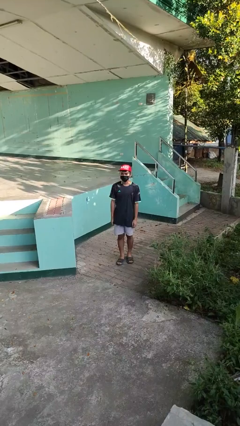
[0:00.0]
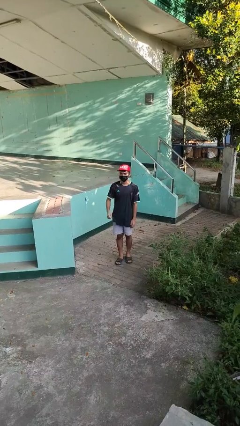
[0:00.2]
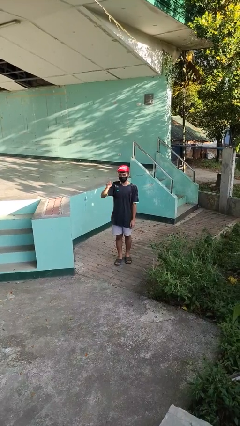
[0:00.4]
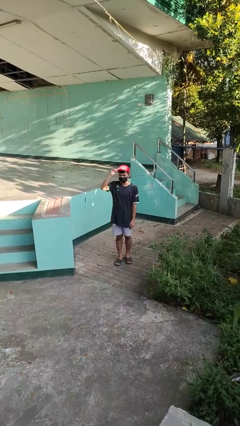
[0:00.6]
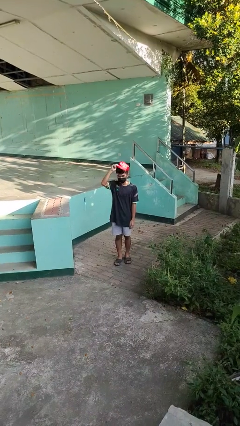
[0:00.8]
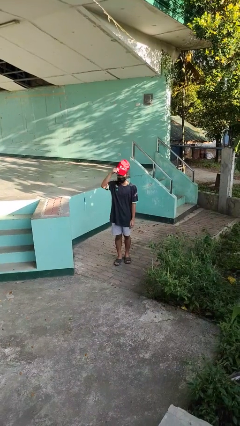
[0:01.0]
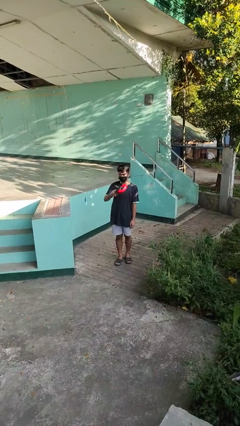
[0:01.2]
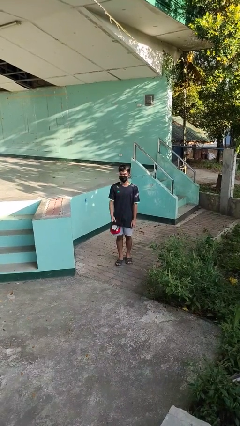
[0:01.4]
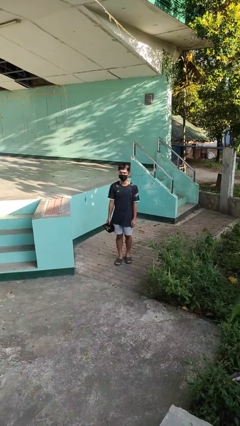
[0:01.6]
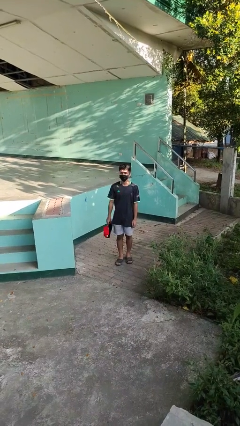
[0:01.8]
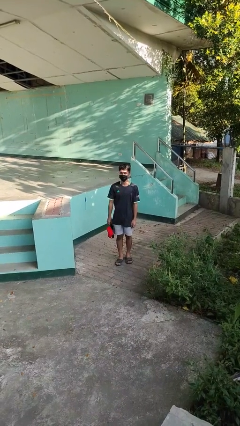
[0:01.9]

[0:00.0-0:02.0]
person takes off hat

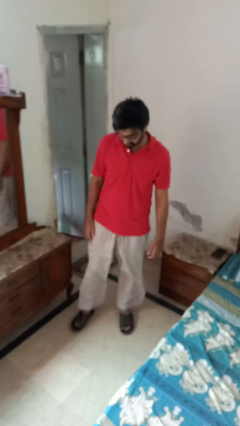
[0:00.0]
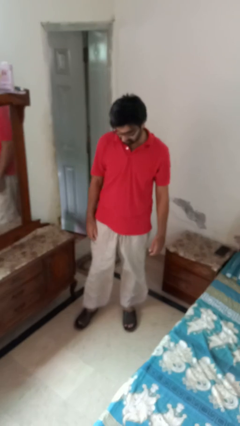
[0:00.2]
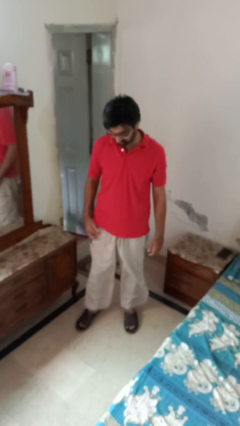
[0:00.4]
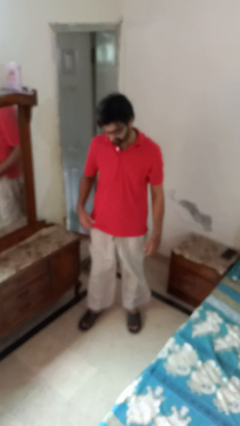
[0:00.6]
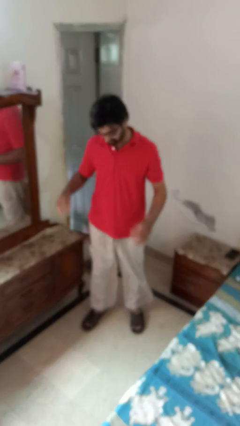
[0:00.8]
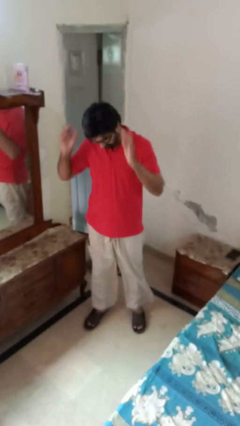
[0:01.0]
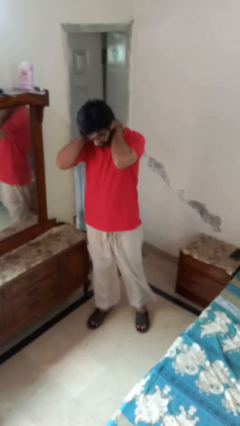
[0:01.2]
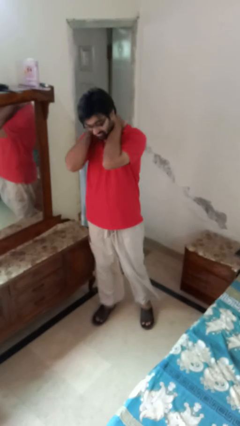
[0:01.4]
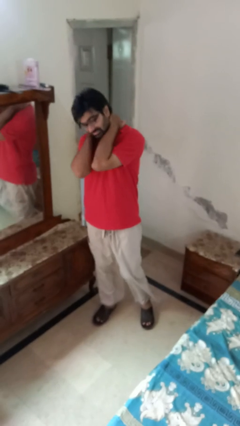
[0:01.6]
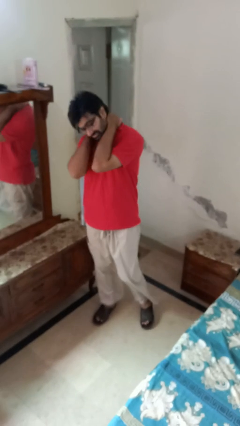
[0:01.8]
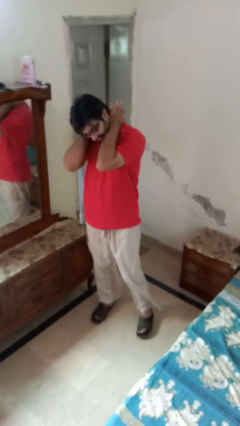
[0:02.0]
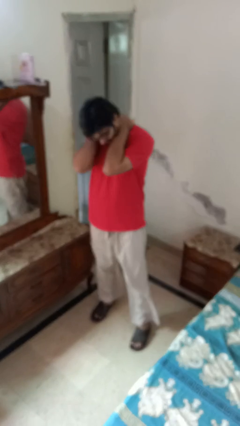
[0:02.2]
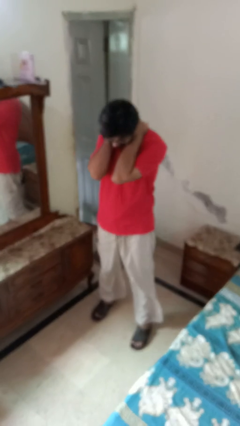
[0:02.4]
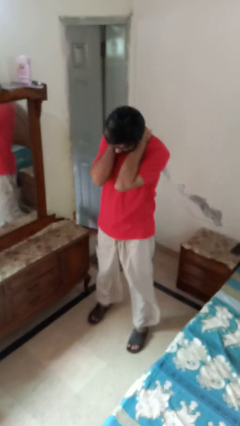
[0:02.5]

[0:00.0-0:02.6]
person rubs neck

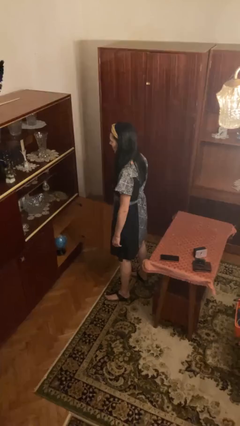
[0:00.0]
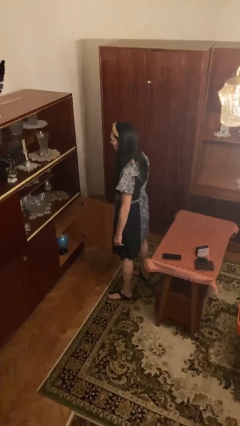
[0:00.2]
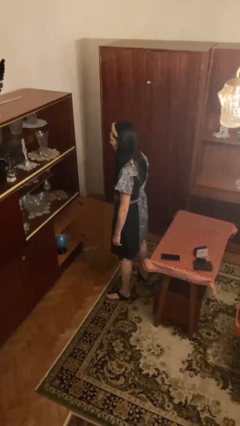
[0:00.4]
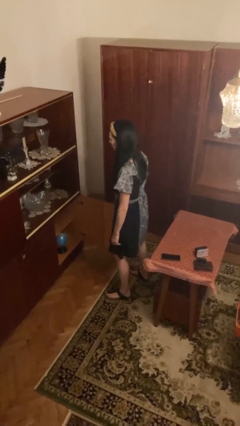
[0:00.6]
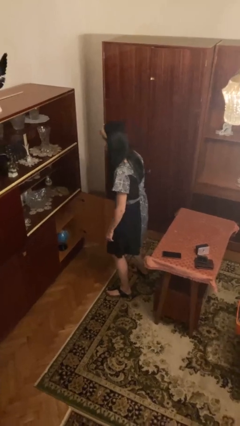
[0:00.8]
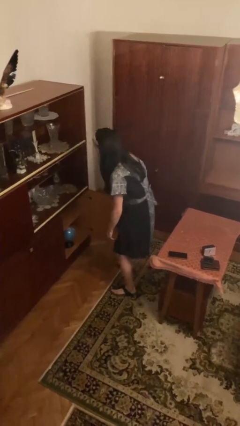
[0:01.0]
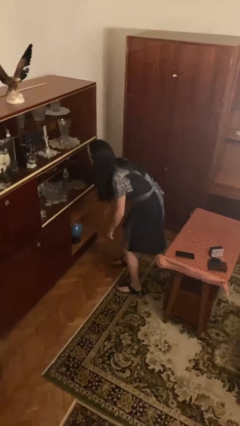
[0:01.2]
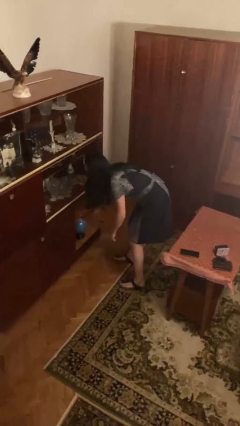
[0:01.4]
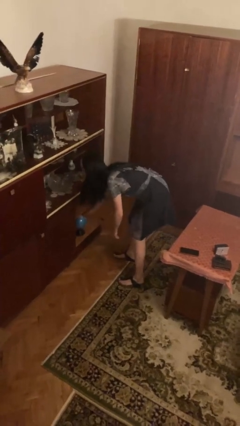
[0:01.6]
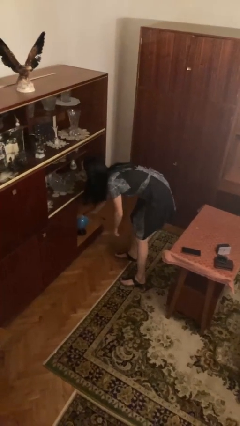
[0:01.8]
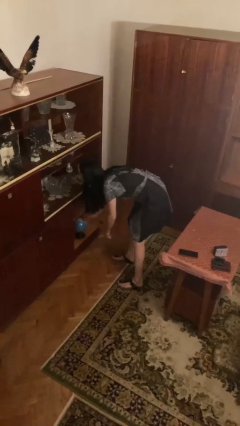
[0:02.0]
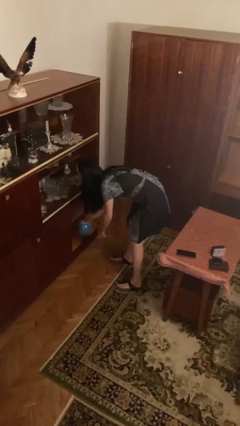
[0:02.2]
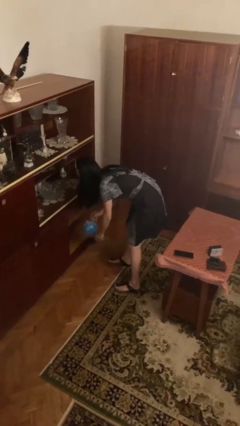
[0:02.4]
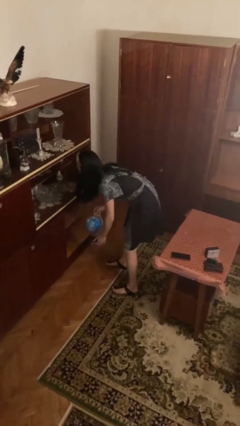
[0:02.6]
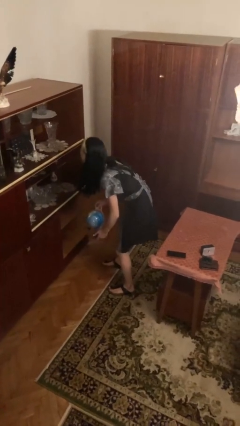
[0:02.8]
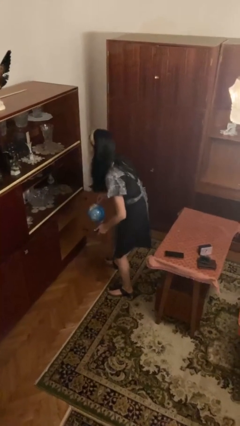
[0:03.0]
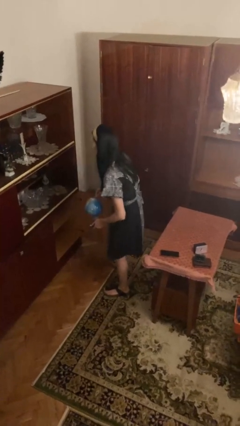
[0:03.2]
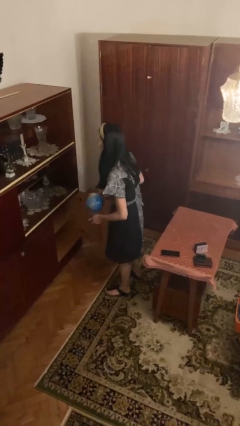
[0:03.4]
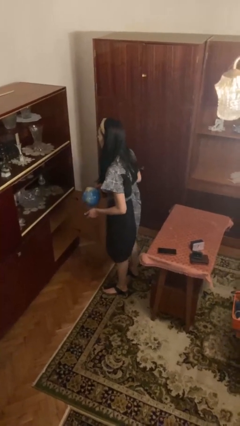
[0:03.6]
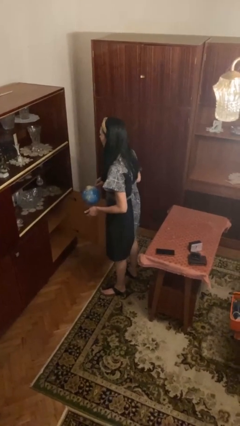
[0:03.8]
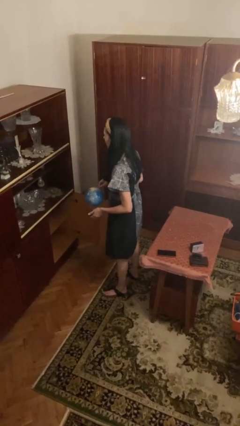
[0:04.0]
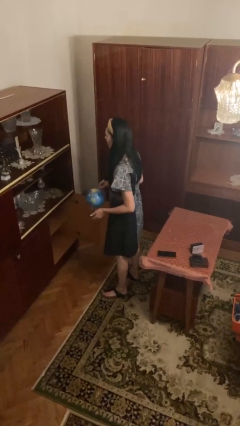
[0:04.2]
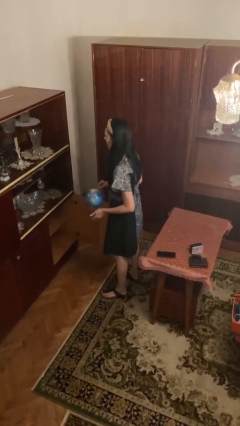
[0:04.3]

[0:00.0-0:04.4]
person picks up object from cabinet

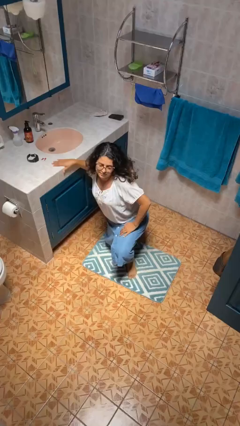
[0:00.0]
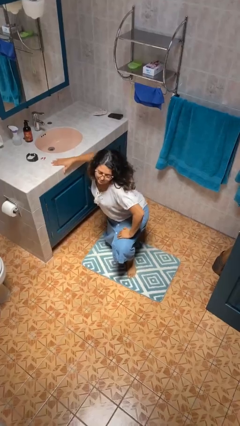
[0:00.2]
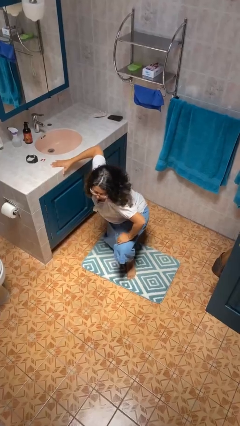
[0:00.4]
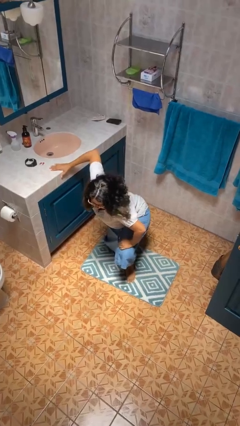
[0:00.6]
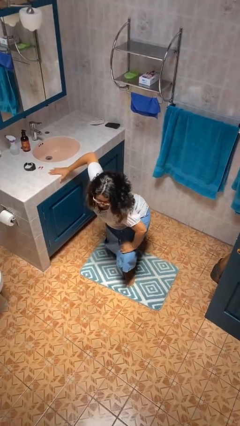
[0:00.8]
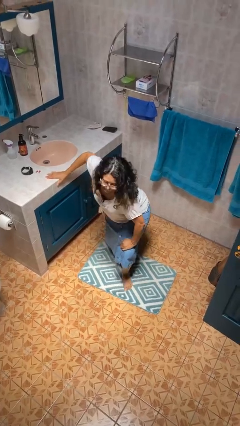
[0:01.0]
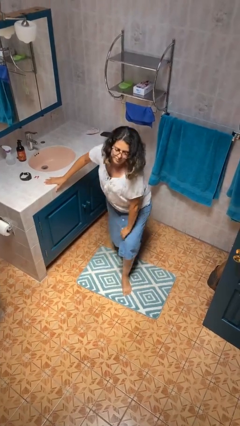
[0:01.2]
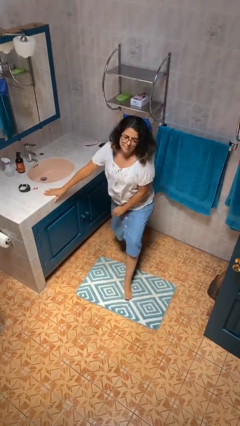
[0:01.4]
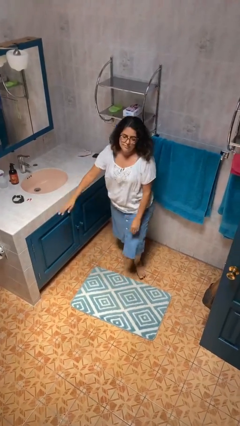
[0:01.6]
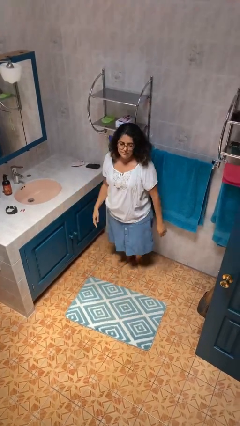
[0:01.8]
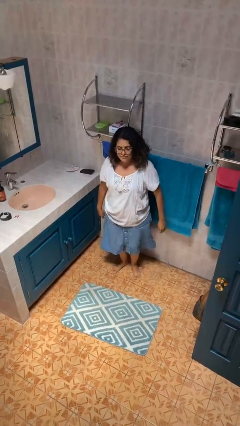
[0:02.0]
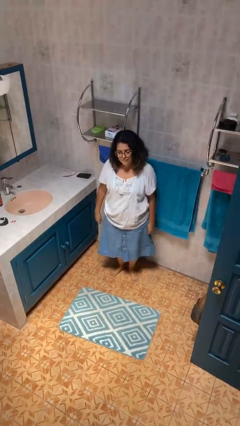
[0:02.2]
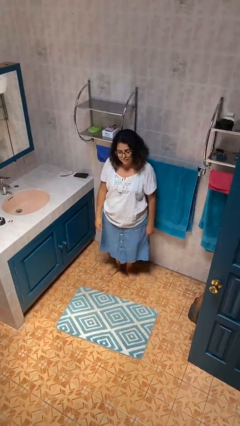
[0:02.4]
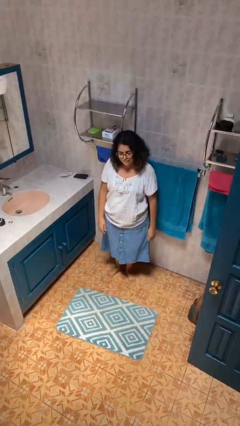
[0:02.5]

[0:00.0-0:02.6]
person stands up from floor

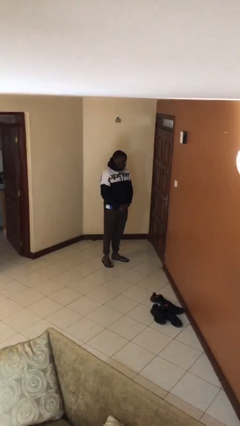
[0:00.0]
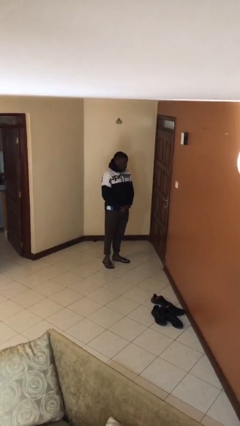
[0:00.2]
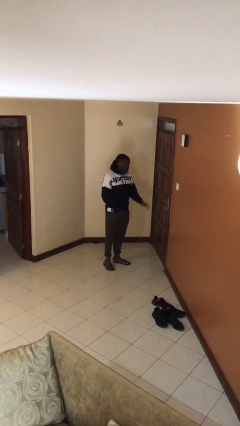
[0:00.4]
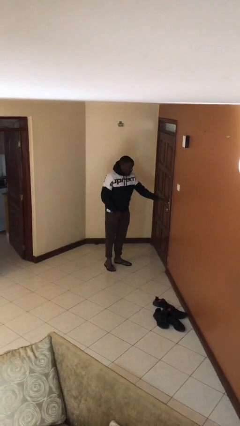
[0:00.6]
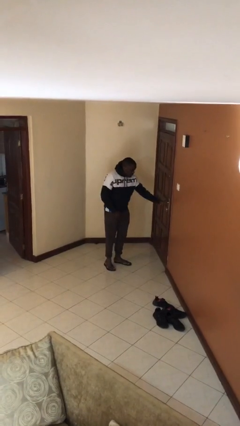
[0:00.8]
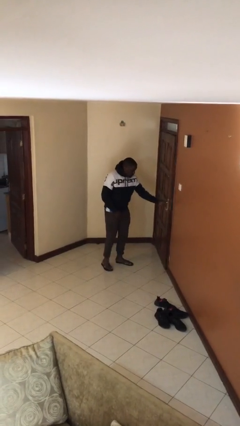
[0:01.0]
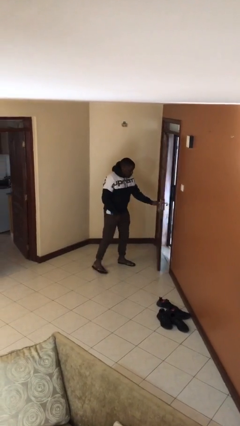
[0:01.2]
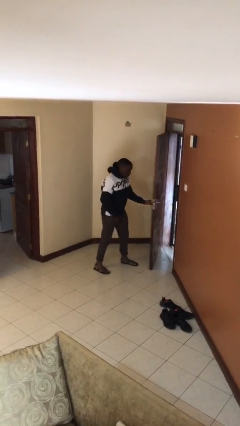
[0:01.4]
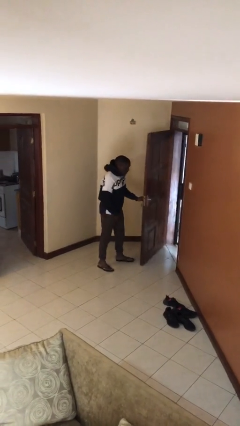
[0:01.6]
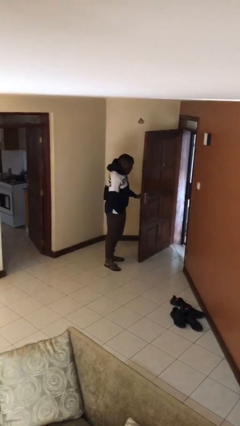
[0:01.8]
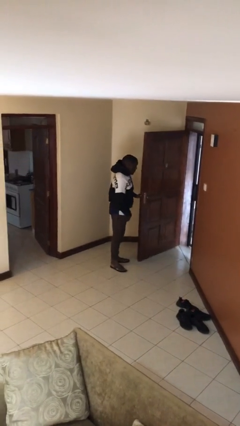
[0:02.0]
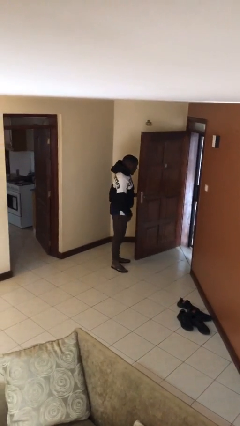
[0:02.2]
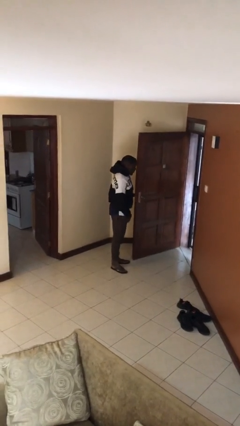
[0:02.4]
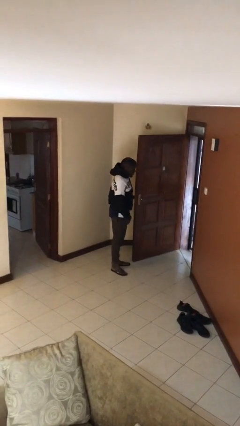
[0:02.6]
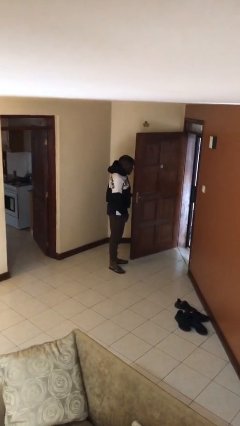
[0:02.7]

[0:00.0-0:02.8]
person opens facility door

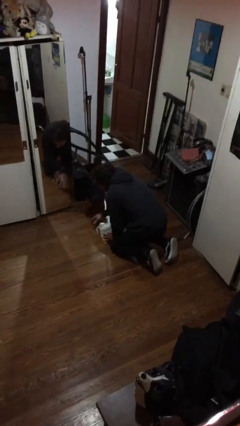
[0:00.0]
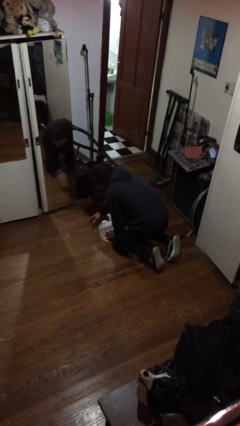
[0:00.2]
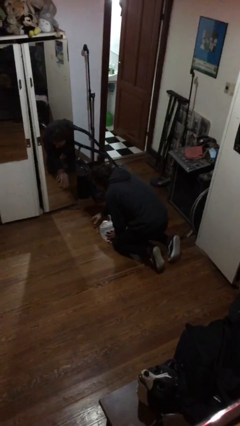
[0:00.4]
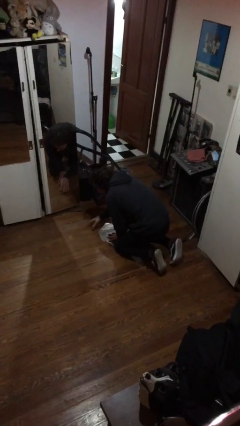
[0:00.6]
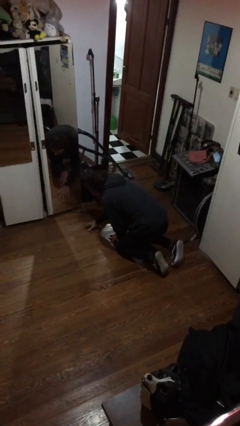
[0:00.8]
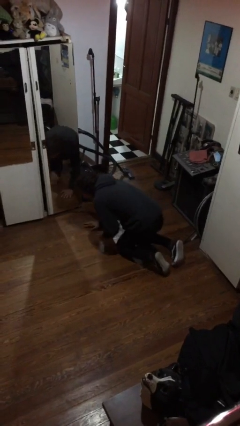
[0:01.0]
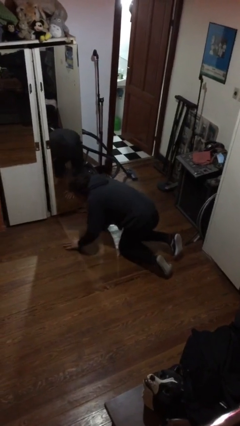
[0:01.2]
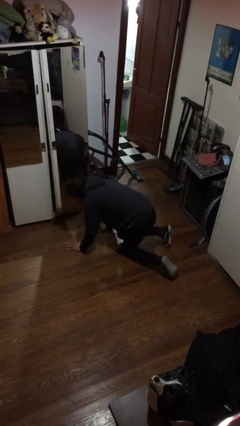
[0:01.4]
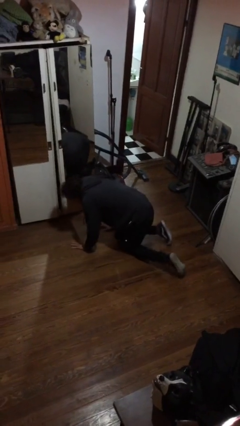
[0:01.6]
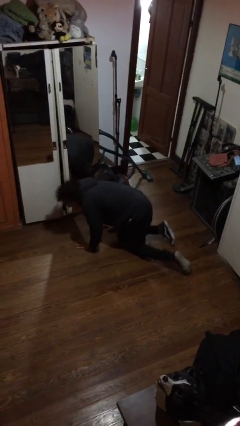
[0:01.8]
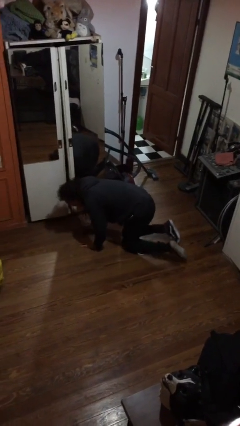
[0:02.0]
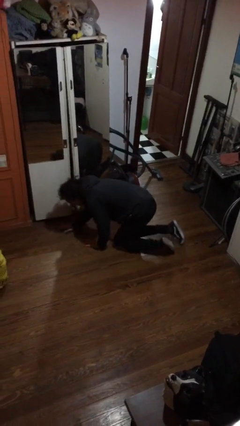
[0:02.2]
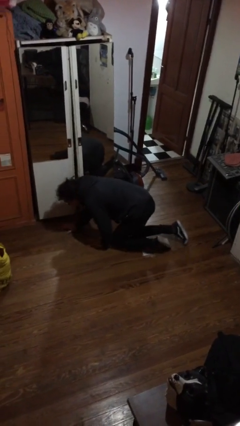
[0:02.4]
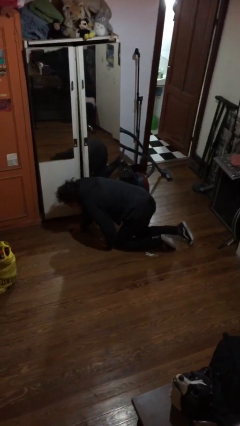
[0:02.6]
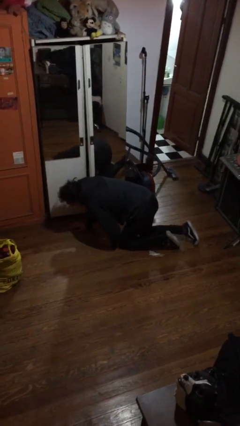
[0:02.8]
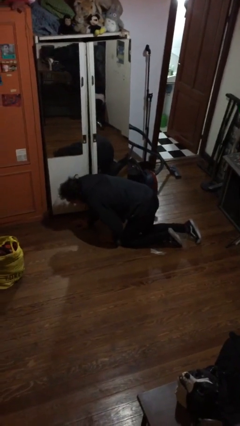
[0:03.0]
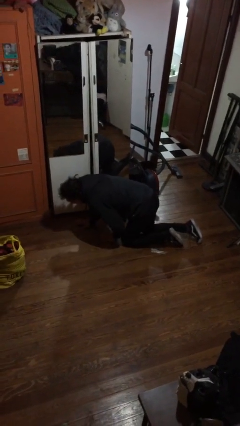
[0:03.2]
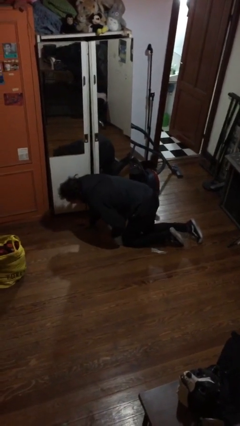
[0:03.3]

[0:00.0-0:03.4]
person crawls
